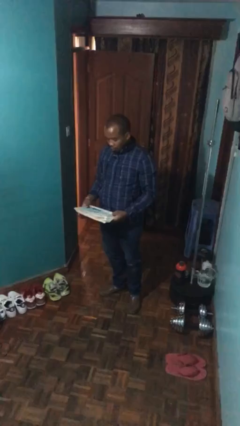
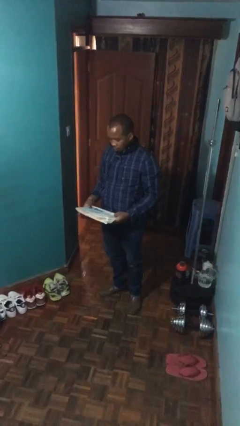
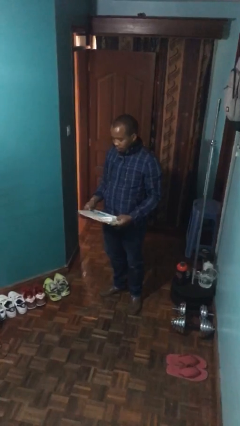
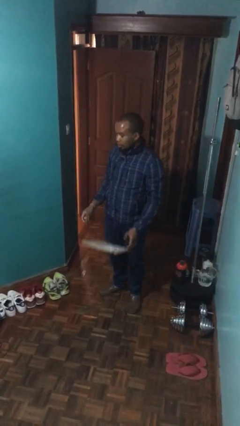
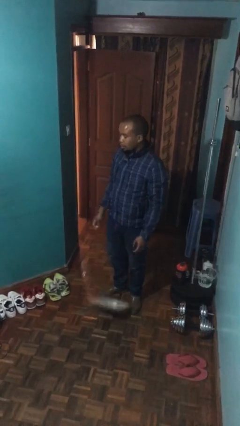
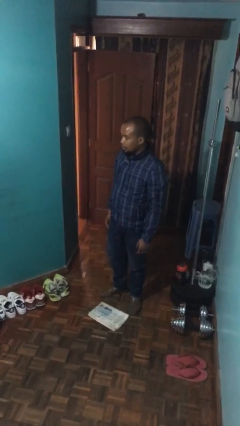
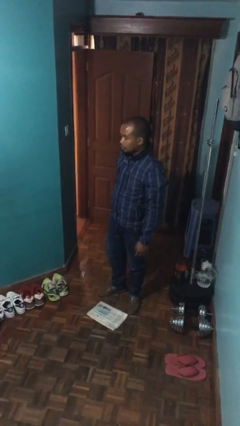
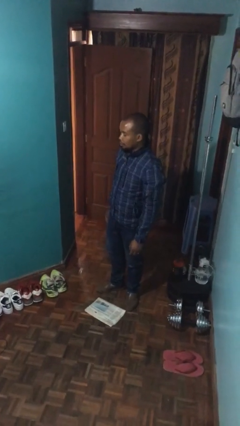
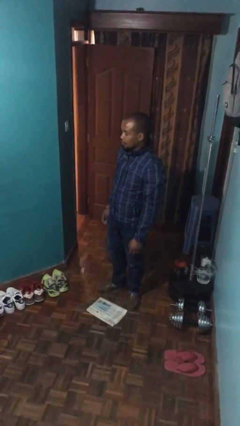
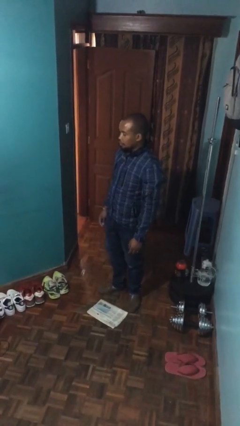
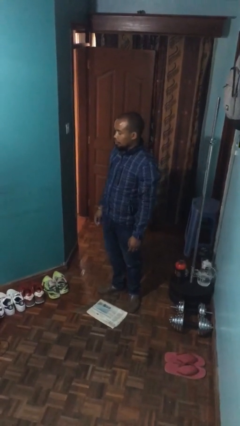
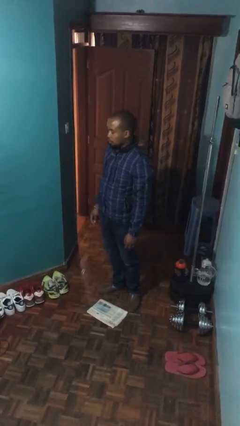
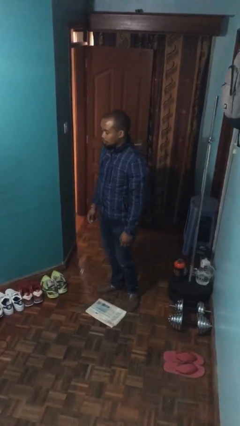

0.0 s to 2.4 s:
person drops object

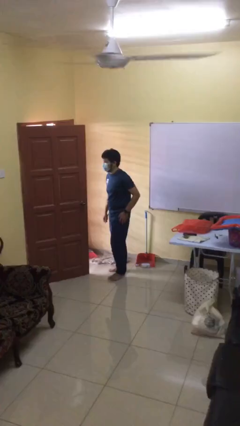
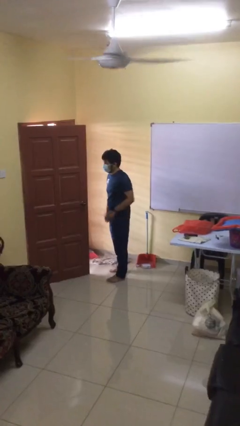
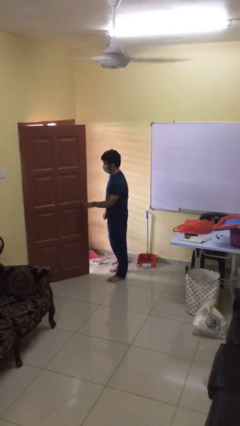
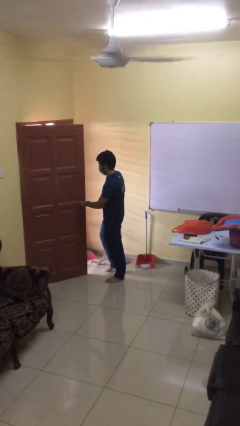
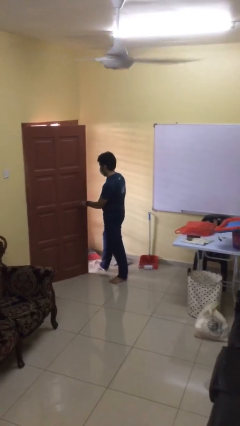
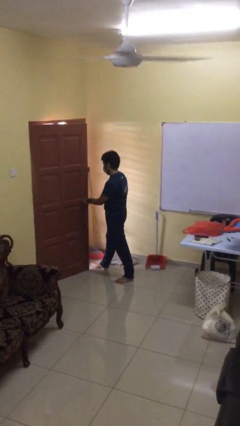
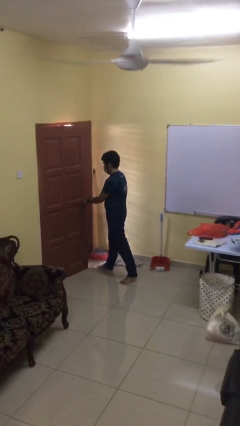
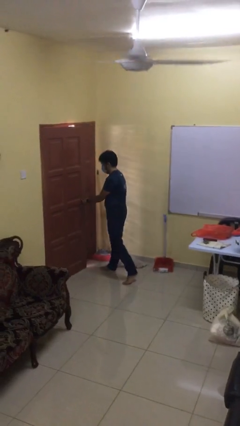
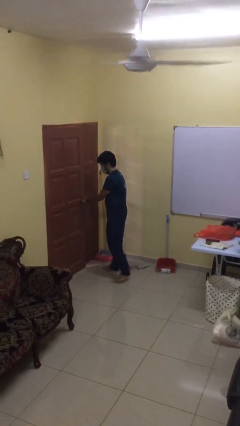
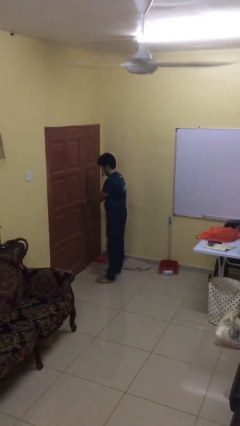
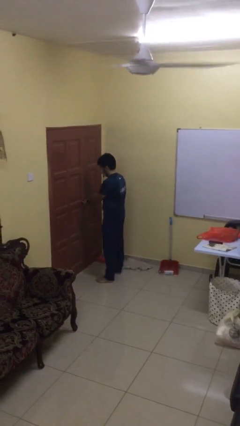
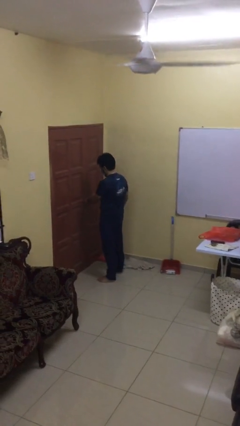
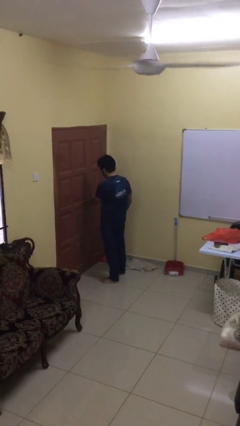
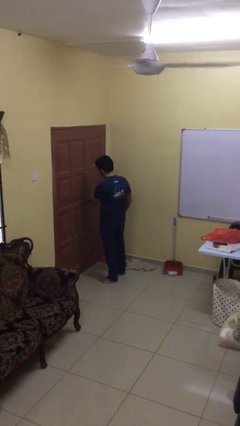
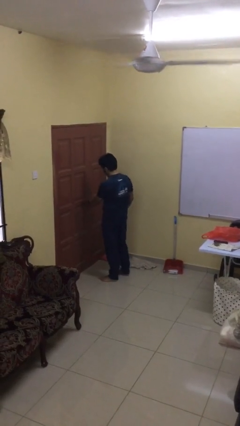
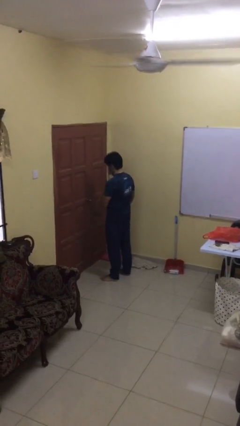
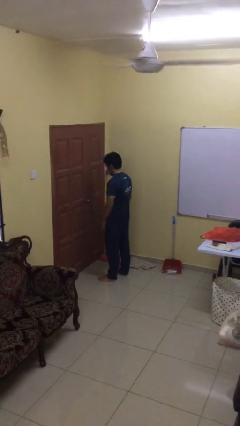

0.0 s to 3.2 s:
person closes facility door

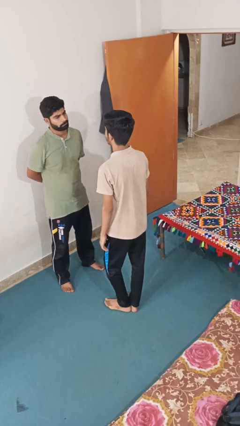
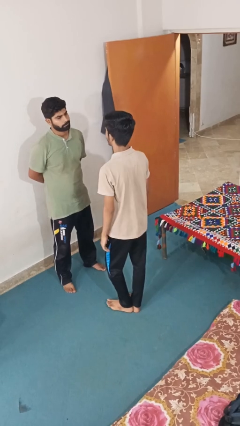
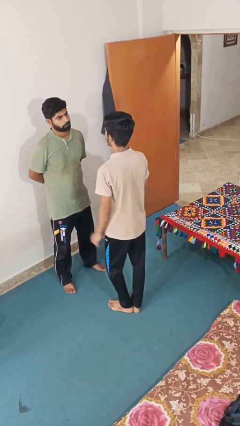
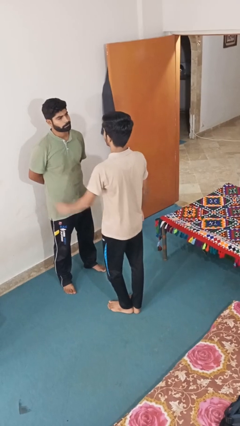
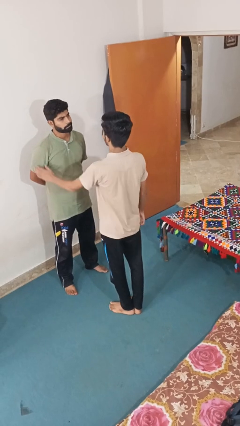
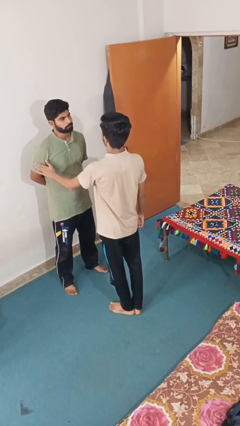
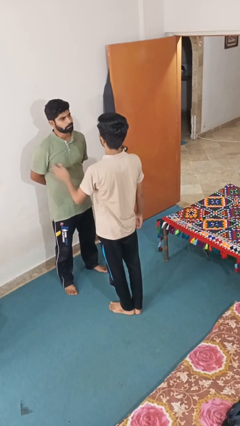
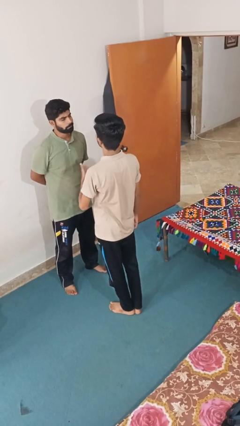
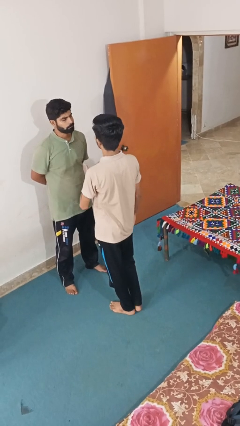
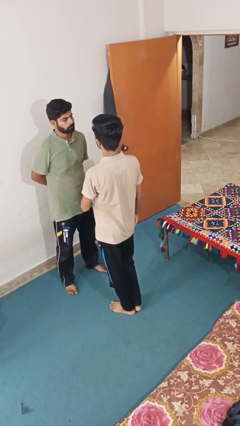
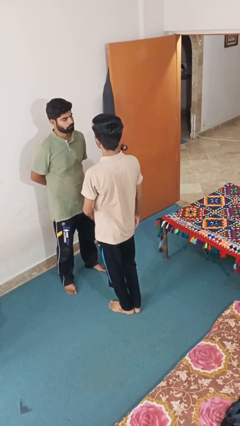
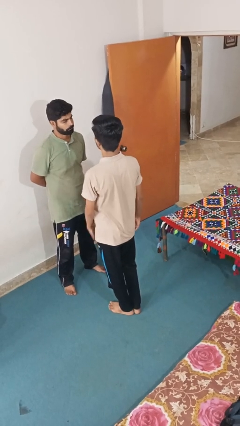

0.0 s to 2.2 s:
person shoves person

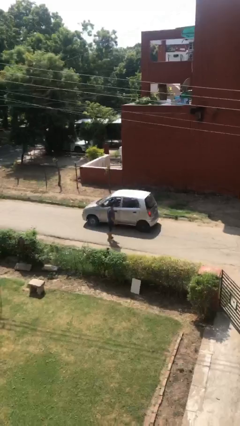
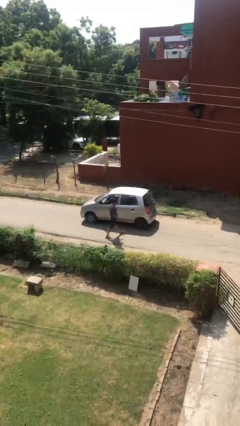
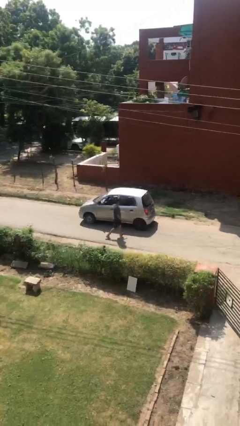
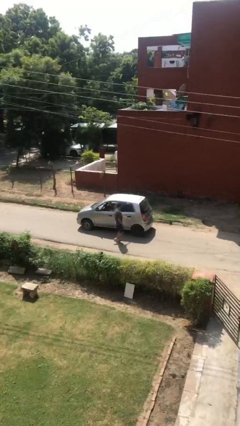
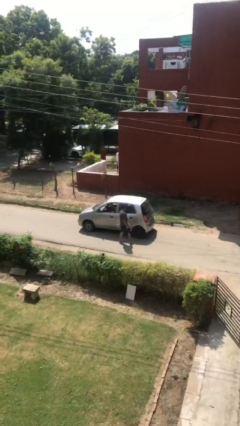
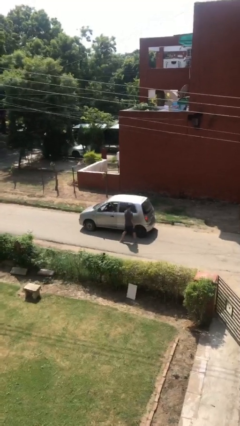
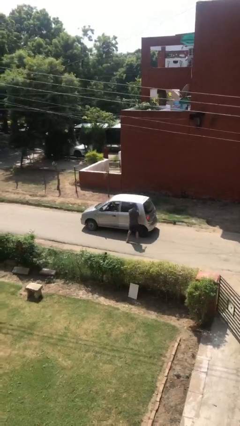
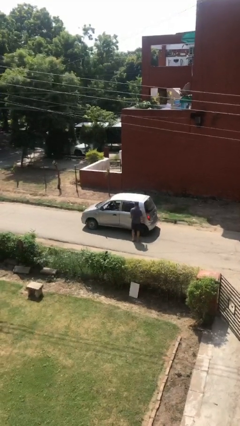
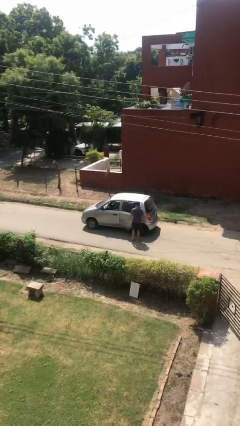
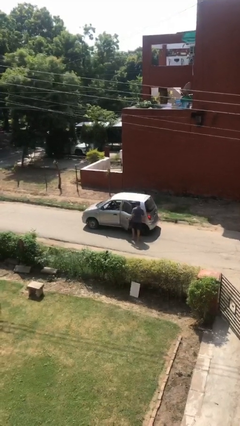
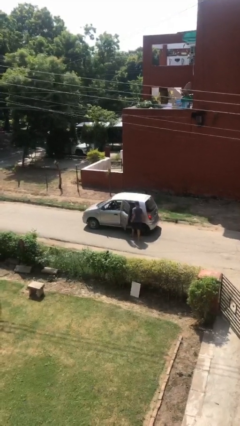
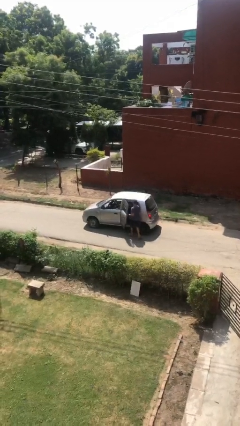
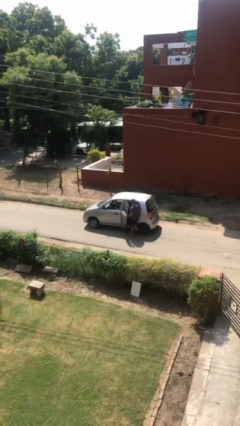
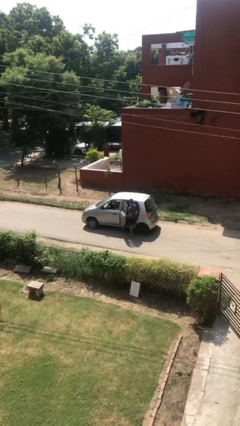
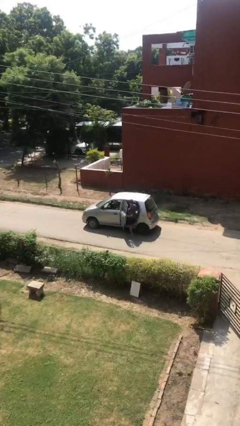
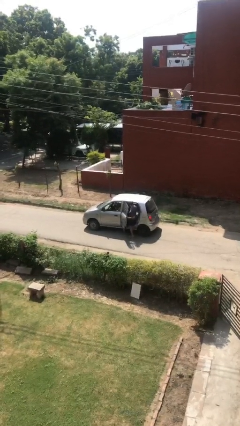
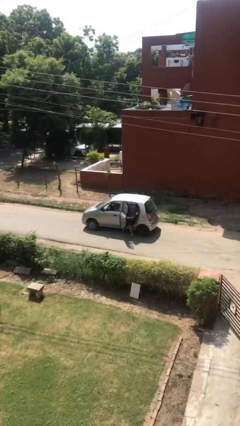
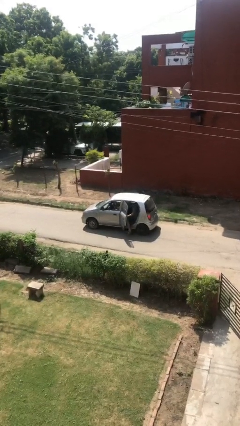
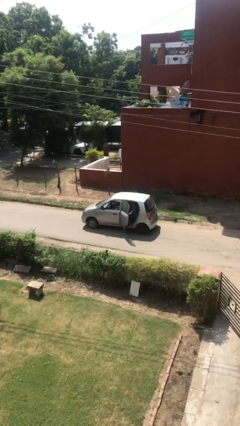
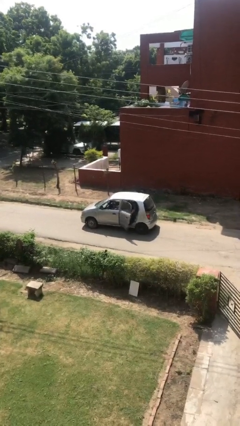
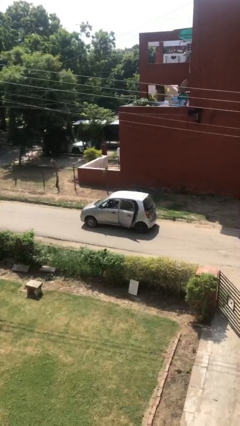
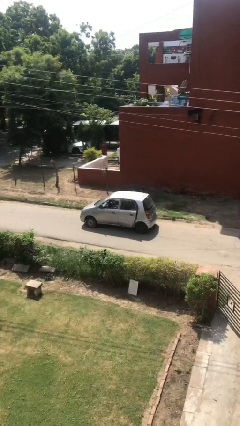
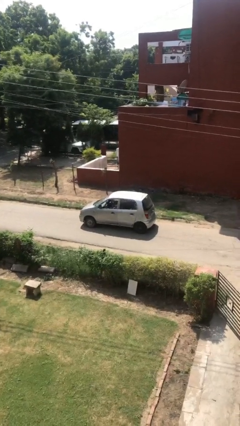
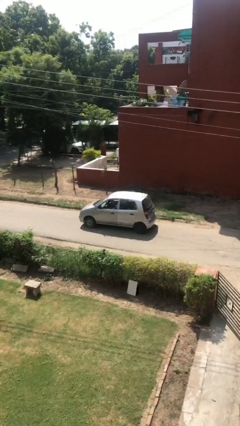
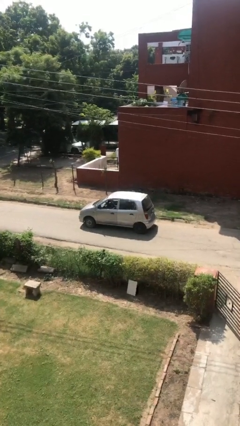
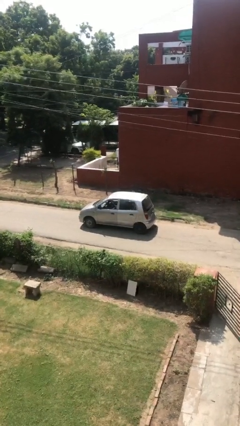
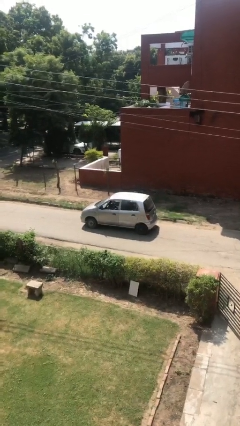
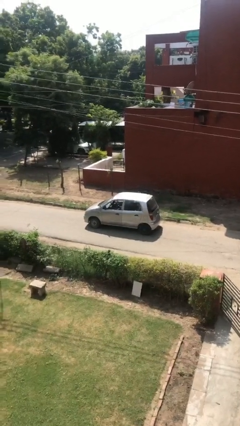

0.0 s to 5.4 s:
car picks up person

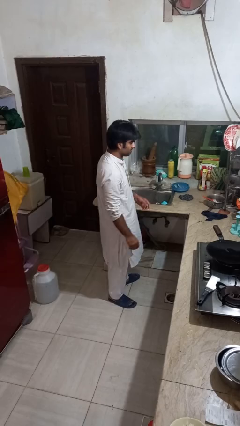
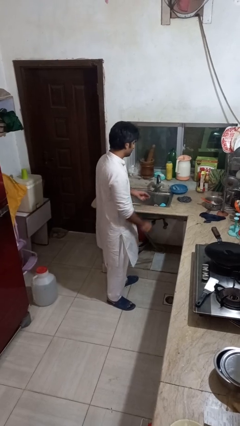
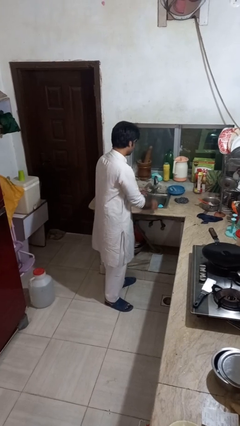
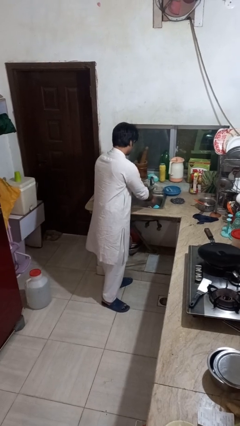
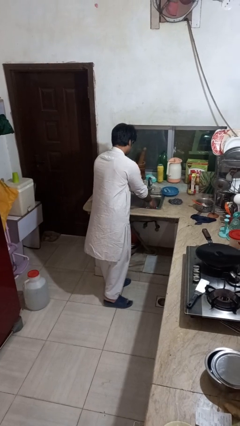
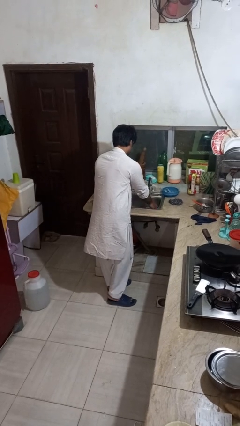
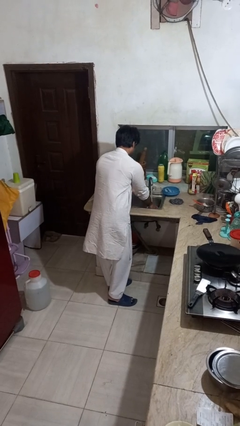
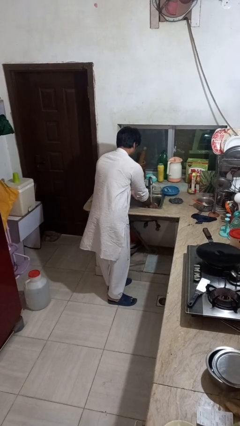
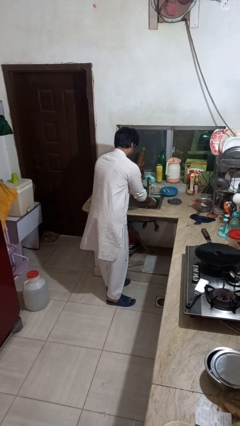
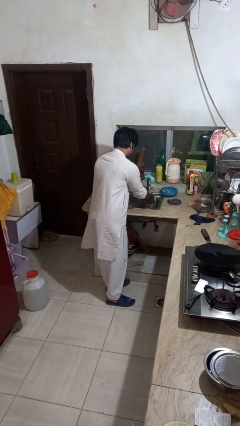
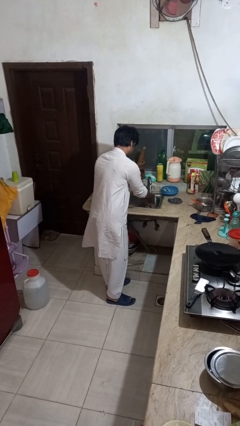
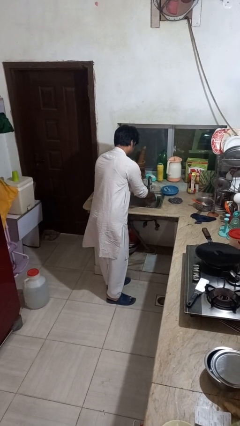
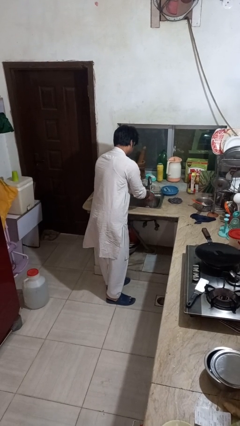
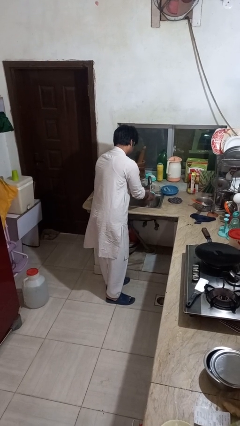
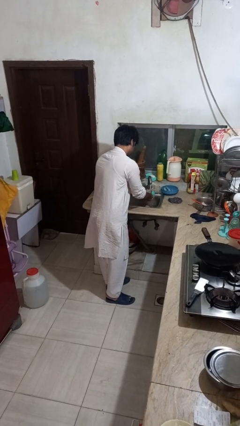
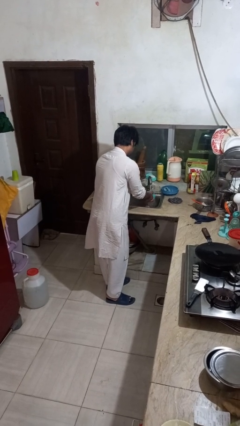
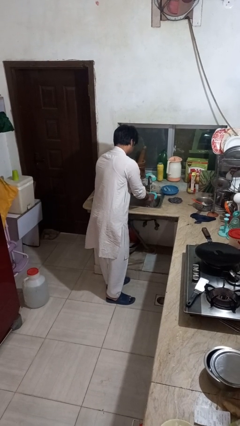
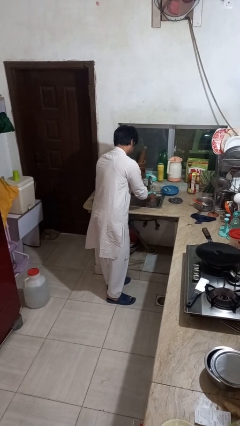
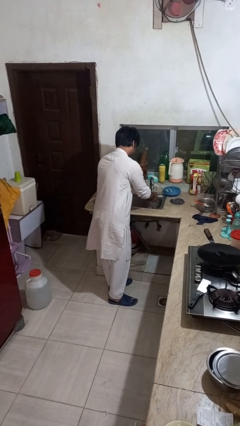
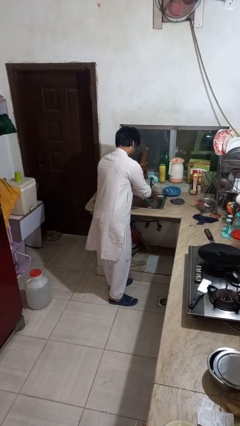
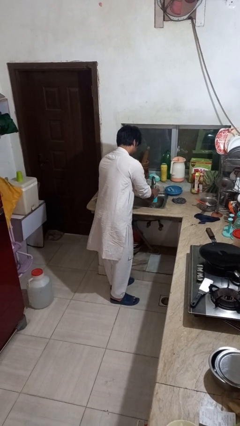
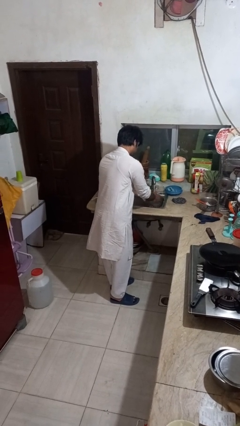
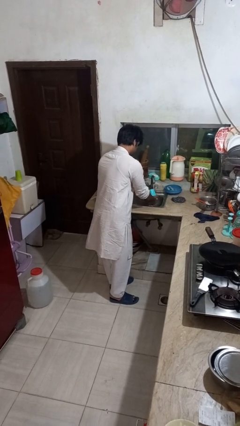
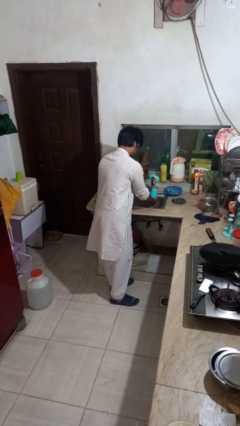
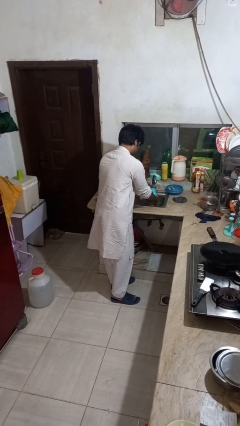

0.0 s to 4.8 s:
person washes dish
